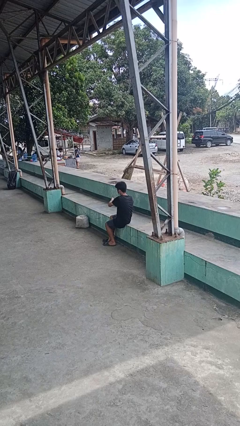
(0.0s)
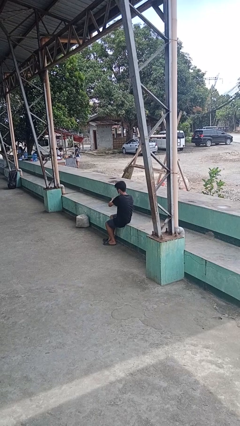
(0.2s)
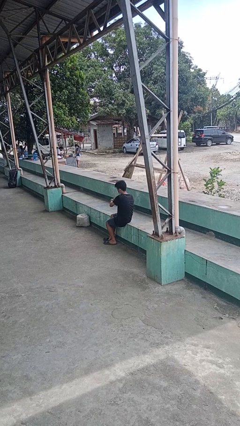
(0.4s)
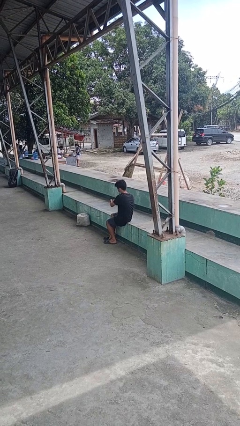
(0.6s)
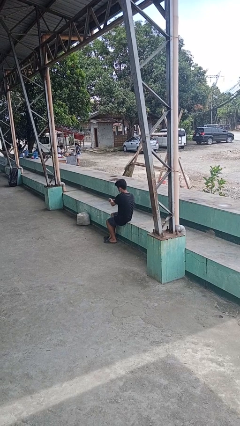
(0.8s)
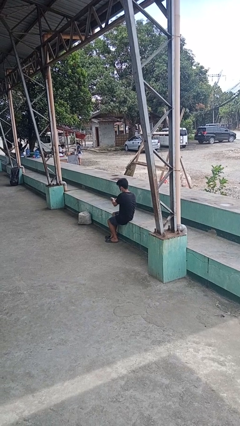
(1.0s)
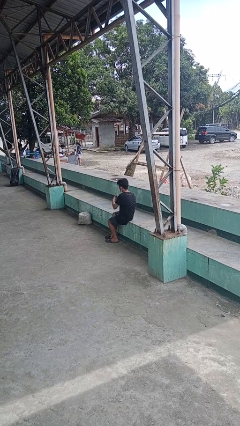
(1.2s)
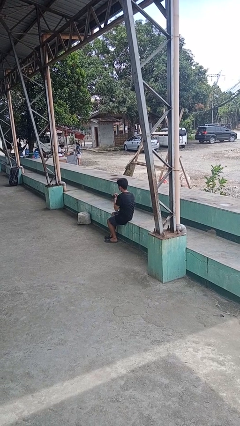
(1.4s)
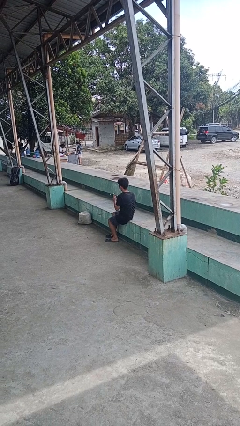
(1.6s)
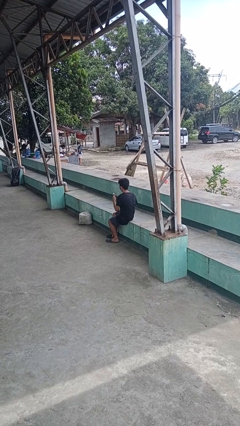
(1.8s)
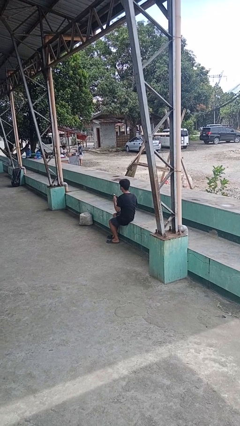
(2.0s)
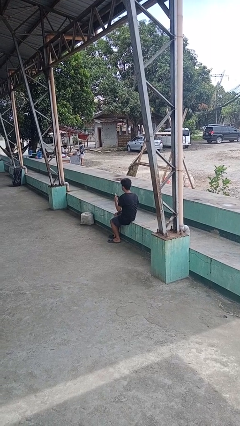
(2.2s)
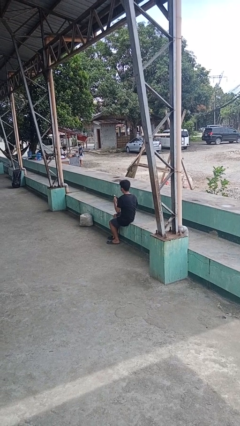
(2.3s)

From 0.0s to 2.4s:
person takes off wristwatch

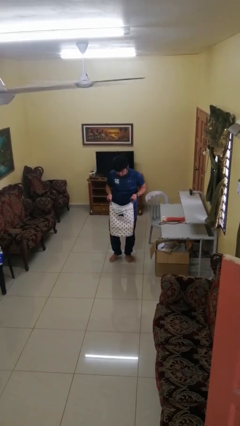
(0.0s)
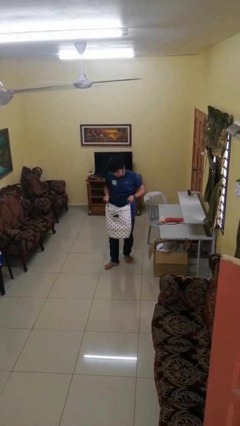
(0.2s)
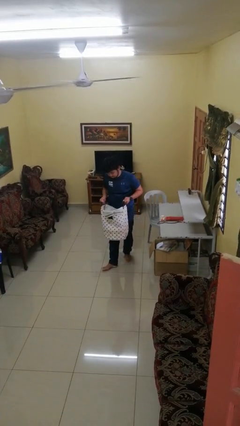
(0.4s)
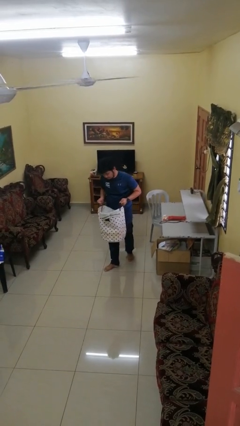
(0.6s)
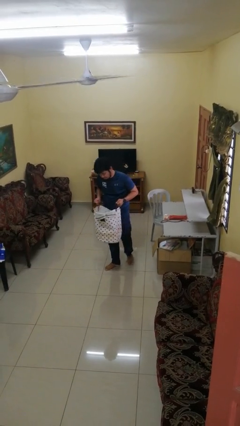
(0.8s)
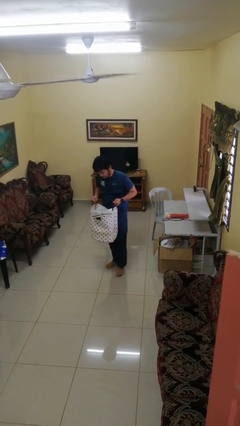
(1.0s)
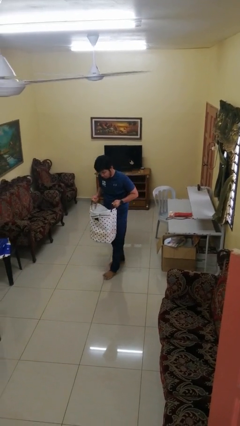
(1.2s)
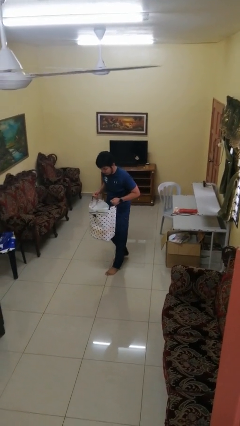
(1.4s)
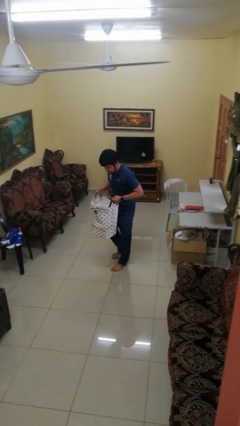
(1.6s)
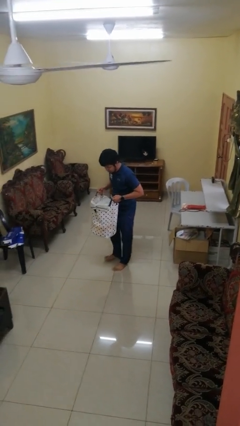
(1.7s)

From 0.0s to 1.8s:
person carries laundry basket

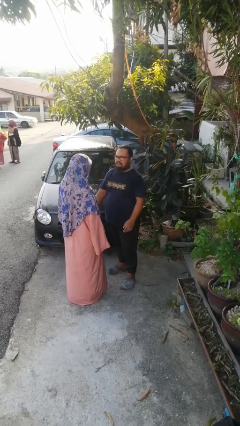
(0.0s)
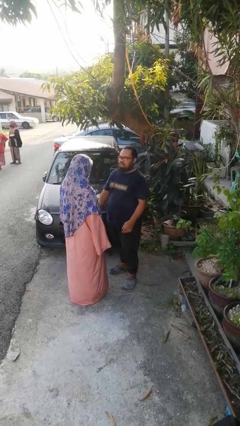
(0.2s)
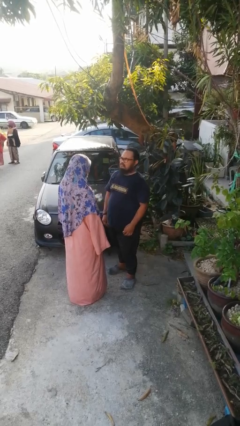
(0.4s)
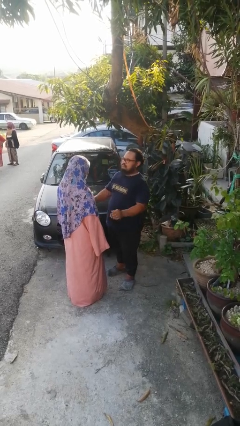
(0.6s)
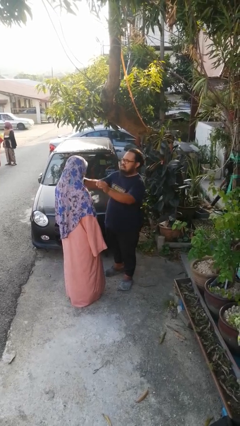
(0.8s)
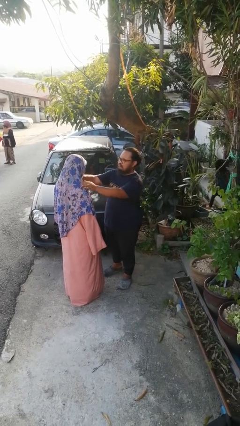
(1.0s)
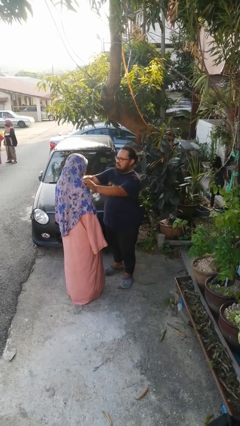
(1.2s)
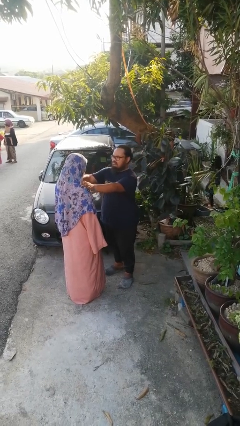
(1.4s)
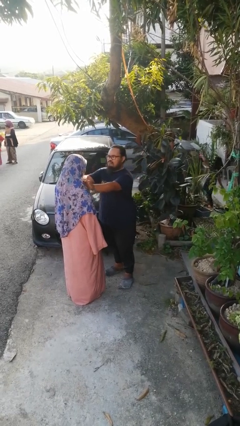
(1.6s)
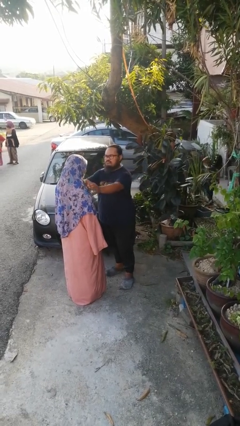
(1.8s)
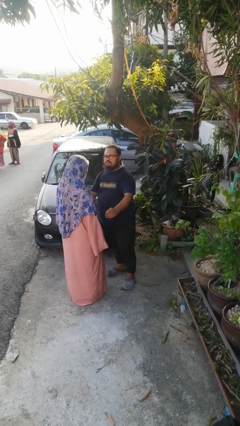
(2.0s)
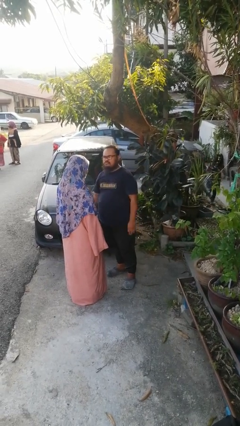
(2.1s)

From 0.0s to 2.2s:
person pounds shoulders of person

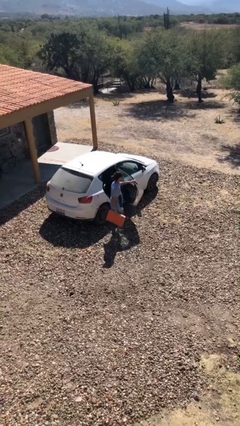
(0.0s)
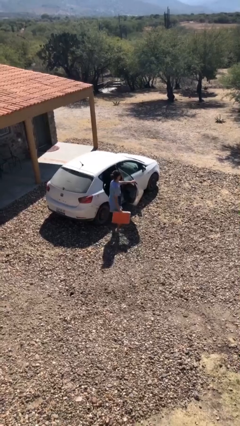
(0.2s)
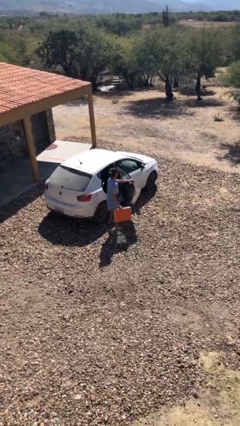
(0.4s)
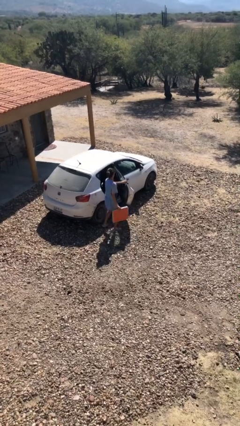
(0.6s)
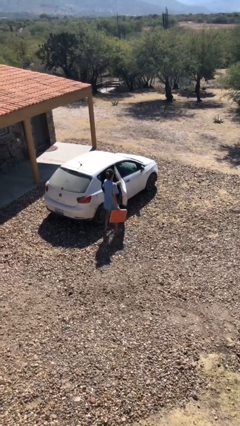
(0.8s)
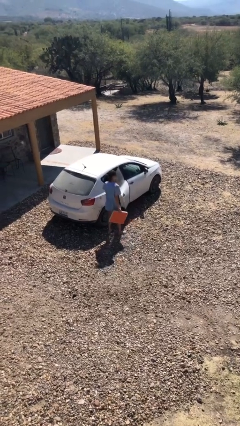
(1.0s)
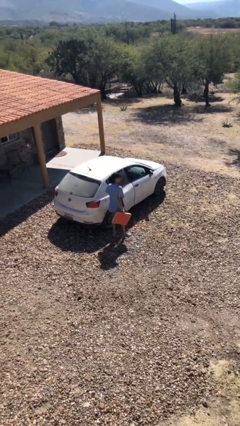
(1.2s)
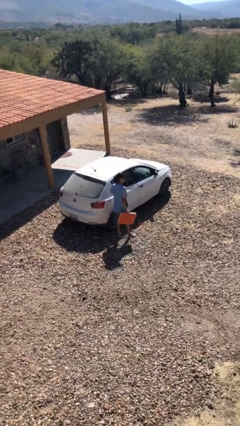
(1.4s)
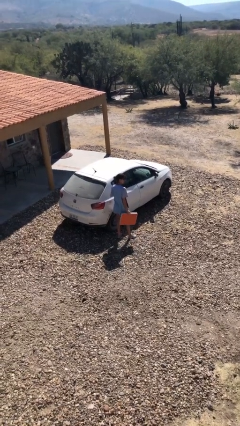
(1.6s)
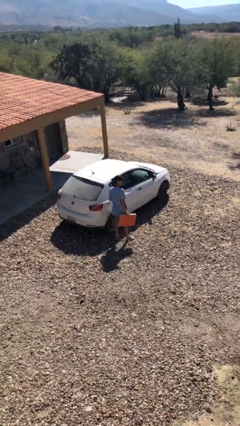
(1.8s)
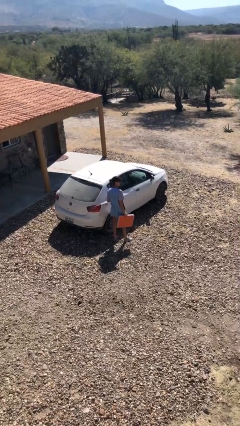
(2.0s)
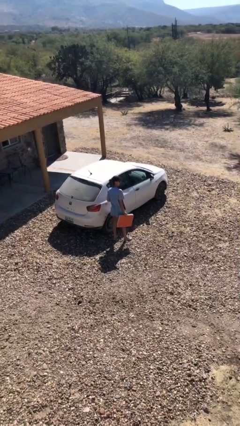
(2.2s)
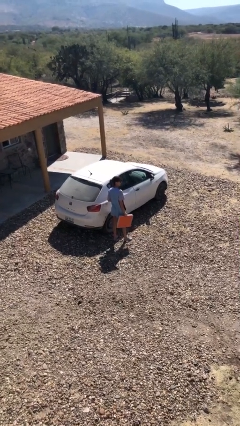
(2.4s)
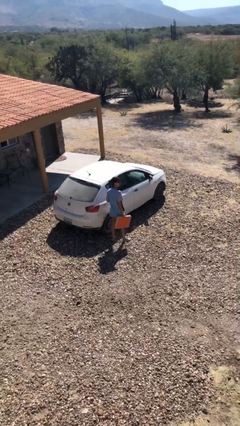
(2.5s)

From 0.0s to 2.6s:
person closes car door

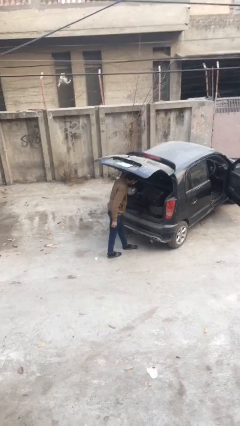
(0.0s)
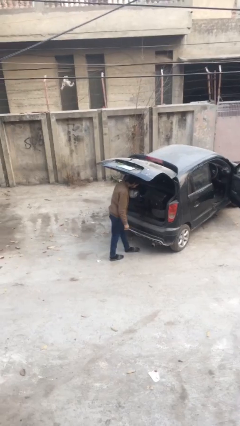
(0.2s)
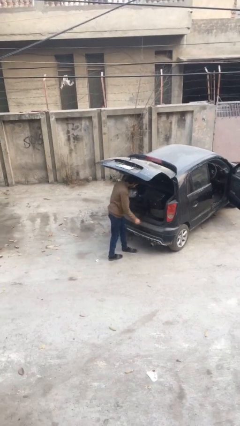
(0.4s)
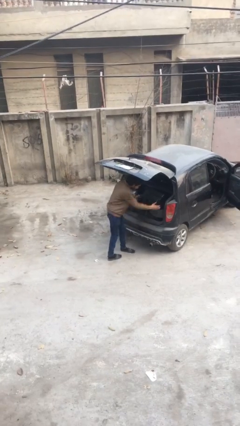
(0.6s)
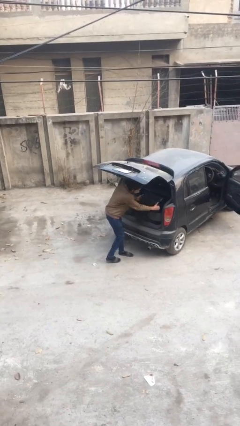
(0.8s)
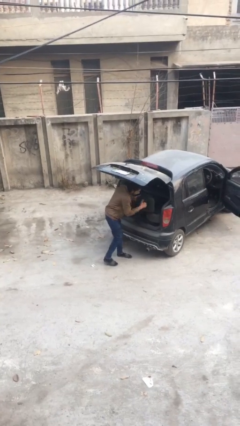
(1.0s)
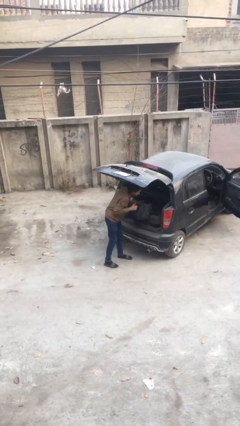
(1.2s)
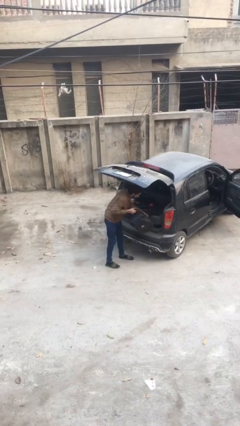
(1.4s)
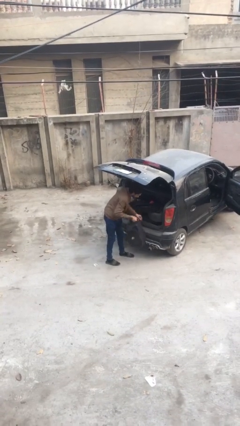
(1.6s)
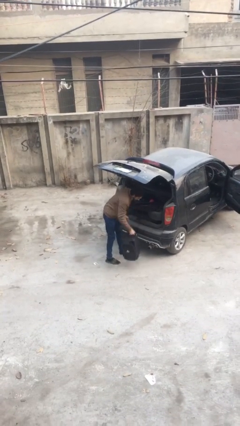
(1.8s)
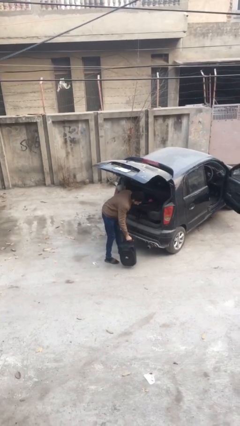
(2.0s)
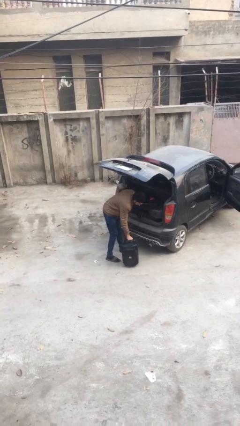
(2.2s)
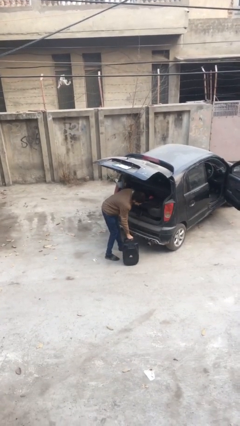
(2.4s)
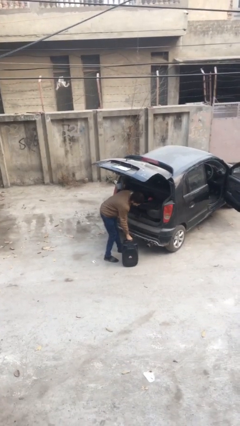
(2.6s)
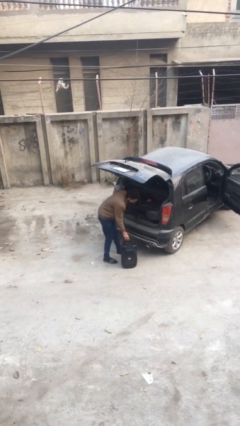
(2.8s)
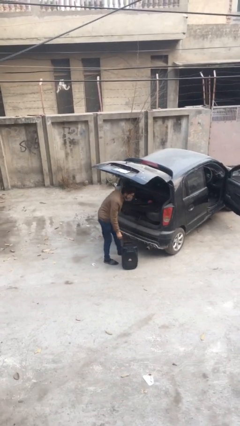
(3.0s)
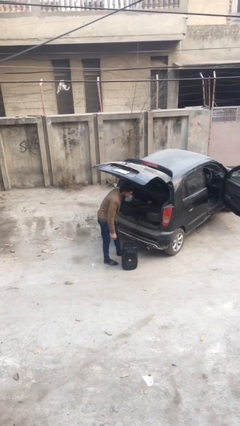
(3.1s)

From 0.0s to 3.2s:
person unloads car

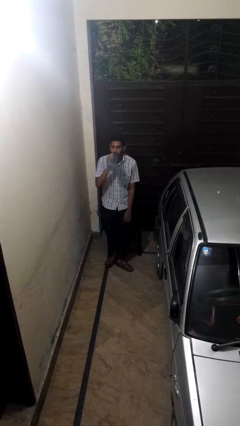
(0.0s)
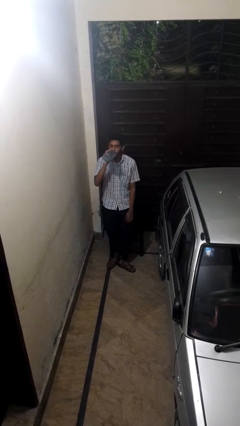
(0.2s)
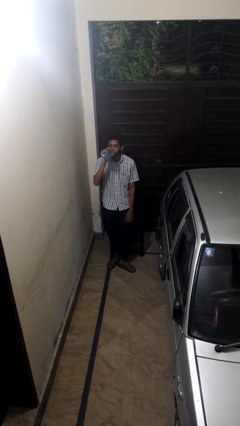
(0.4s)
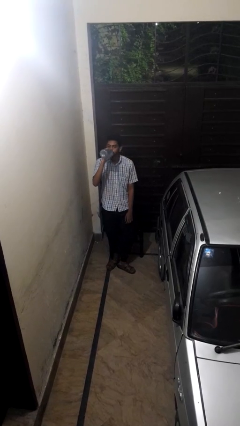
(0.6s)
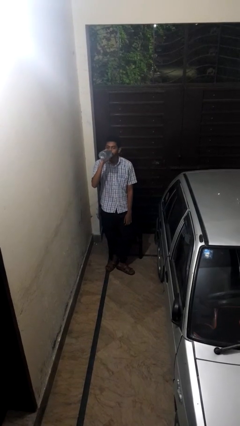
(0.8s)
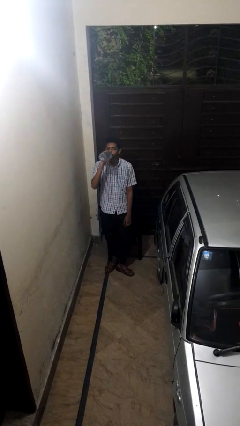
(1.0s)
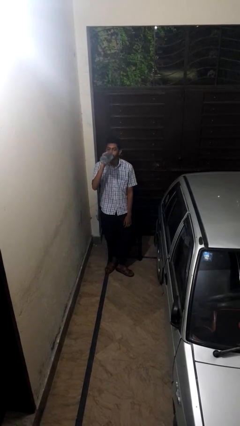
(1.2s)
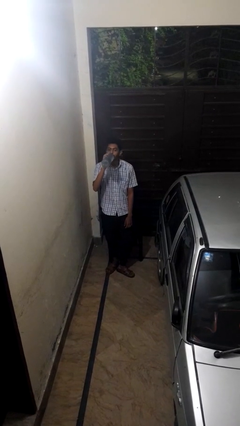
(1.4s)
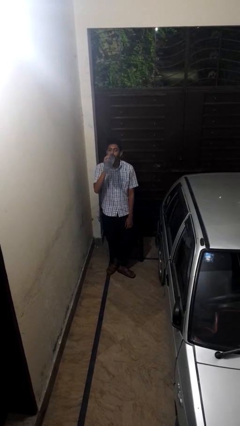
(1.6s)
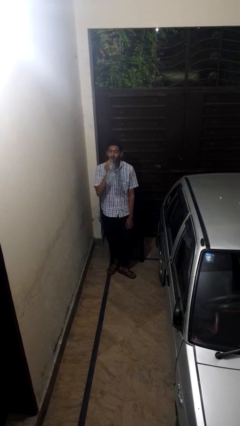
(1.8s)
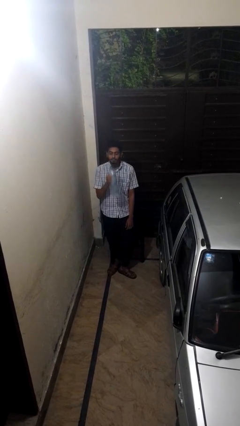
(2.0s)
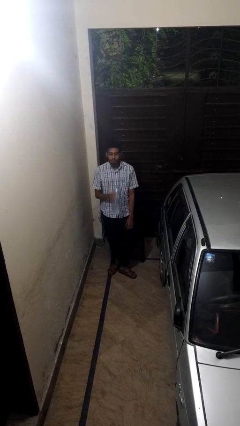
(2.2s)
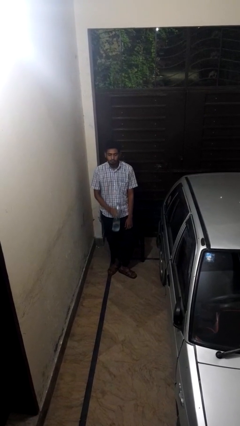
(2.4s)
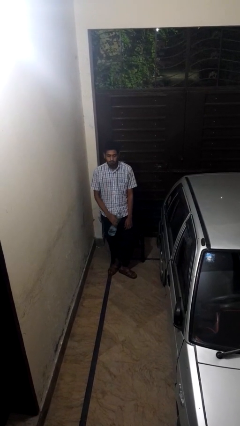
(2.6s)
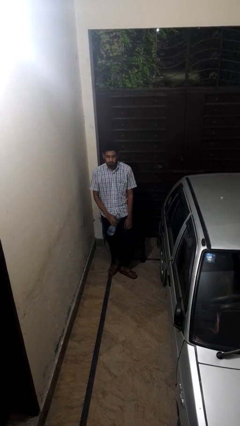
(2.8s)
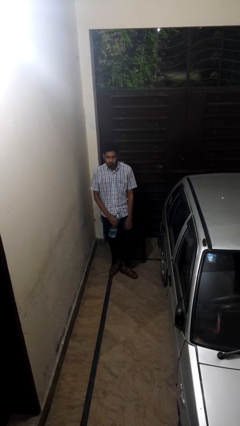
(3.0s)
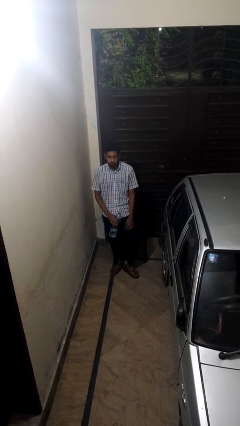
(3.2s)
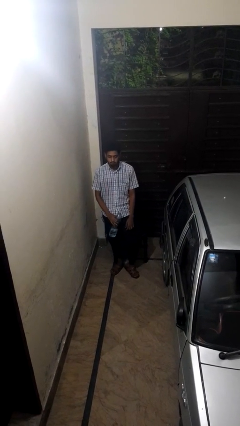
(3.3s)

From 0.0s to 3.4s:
person drinks from bottle

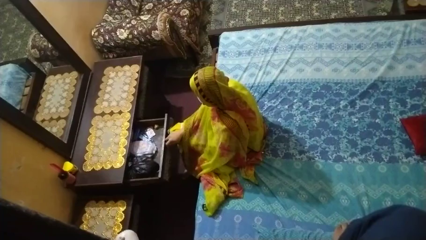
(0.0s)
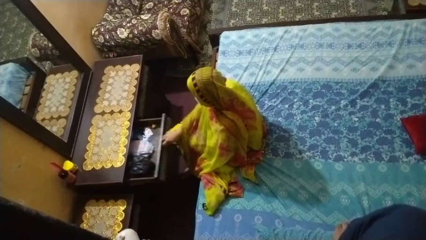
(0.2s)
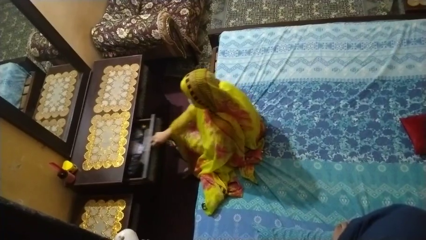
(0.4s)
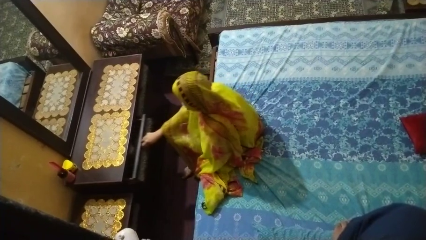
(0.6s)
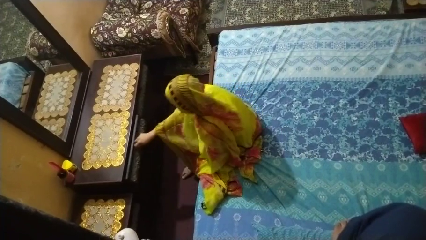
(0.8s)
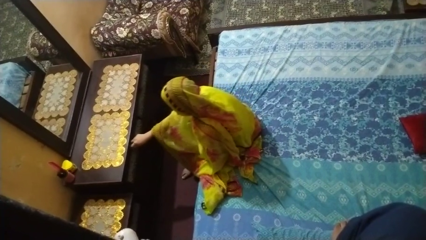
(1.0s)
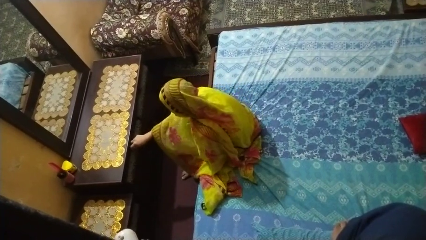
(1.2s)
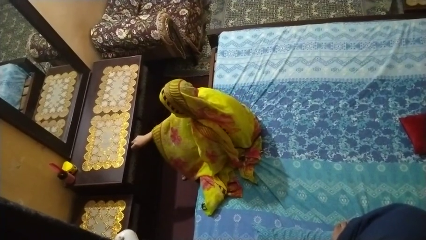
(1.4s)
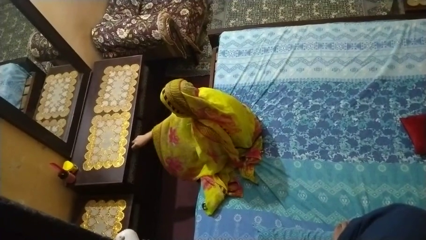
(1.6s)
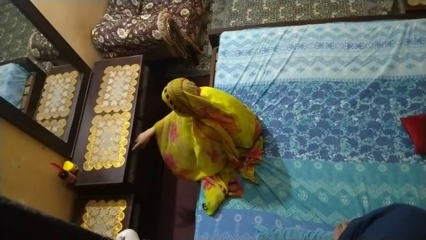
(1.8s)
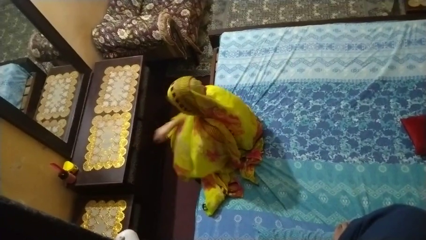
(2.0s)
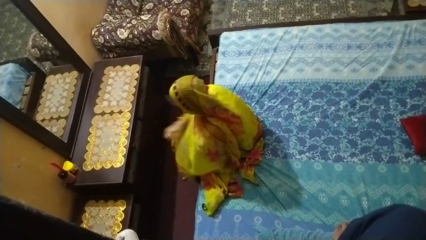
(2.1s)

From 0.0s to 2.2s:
person closes dresser drawer
